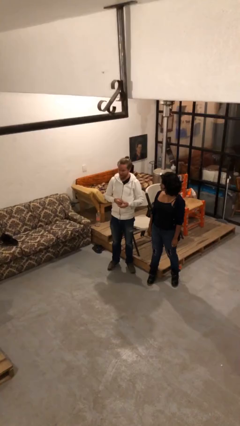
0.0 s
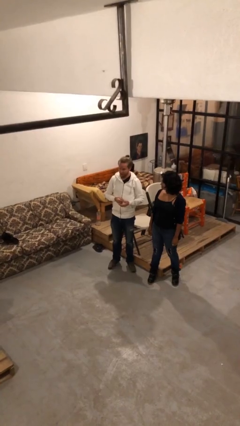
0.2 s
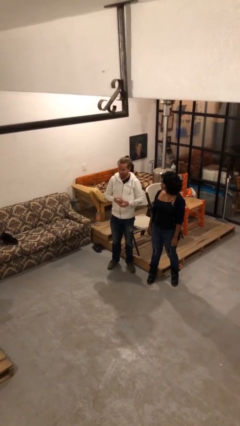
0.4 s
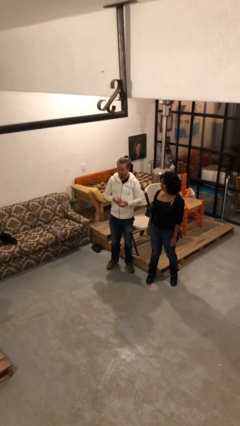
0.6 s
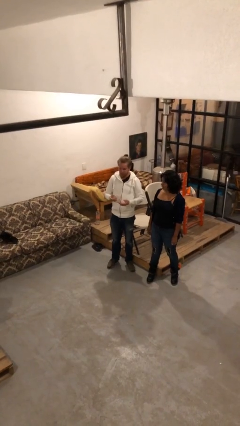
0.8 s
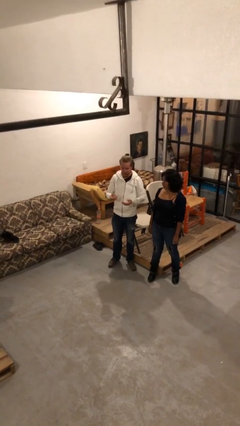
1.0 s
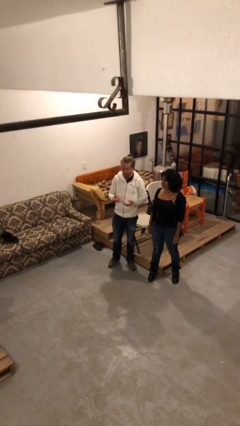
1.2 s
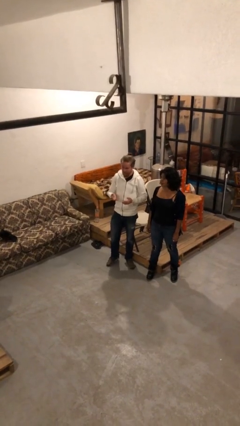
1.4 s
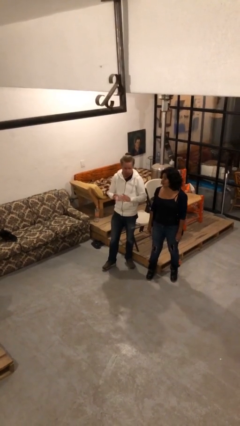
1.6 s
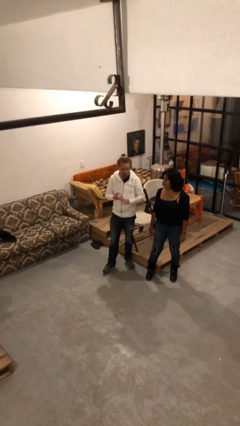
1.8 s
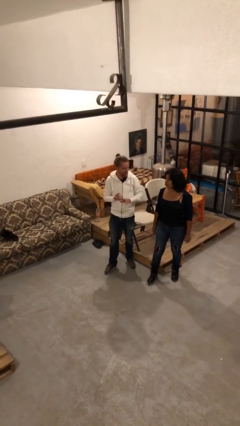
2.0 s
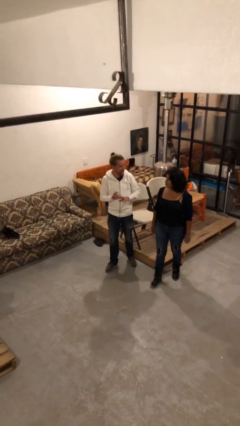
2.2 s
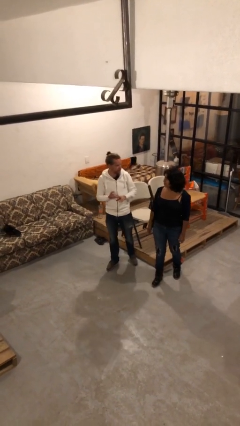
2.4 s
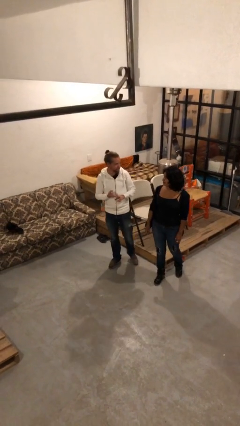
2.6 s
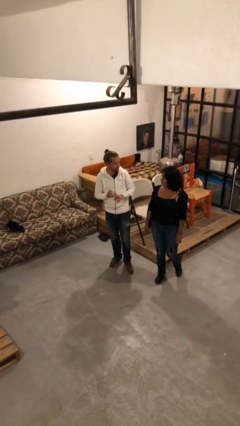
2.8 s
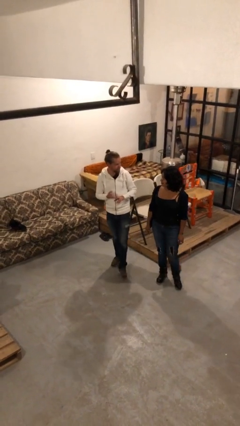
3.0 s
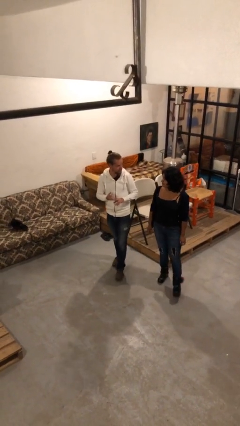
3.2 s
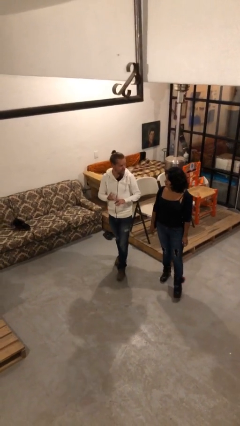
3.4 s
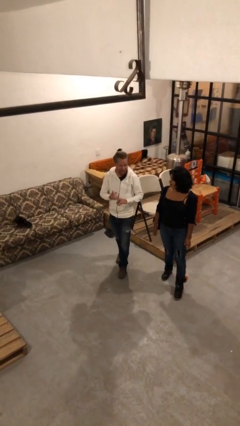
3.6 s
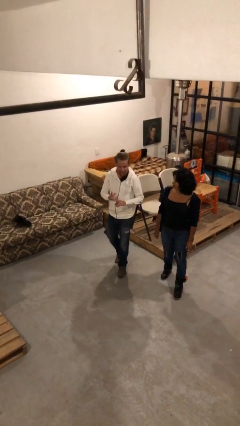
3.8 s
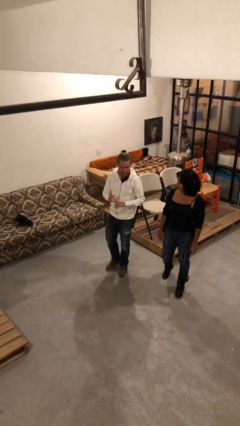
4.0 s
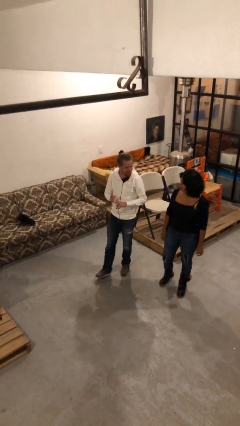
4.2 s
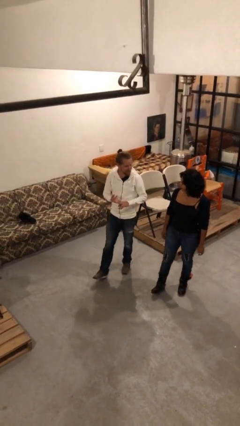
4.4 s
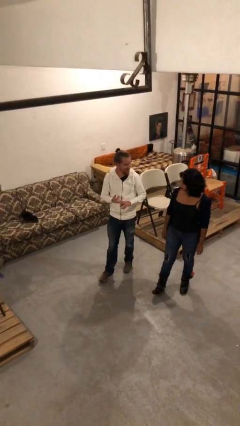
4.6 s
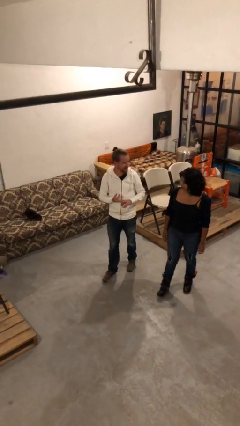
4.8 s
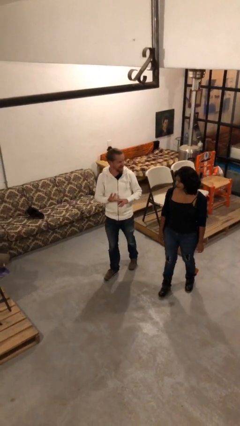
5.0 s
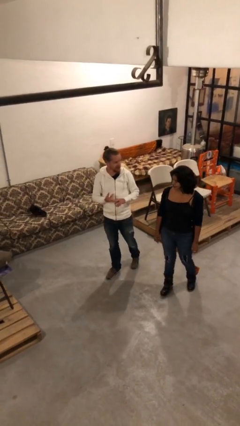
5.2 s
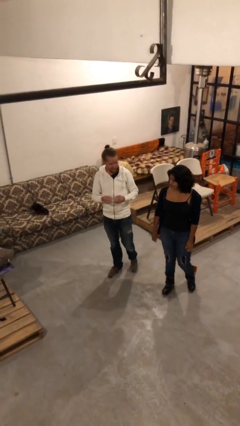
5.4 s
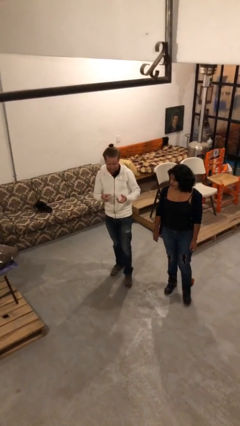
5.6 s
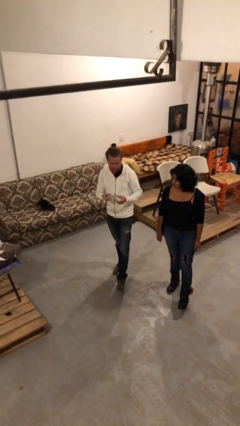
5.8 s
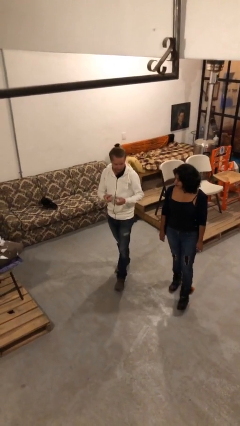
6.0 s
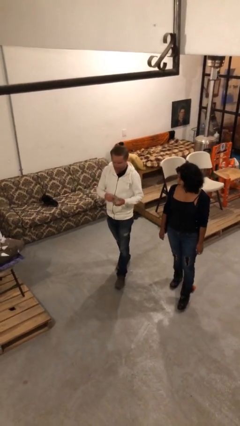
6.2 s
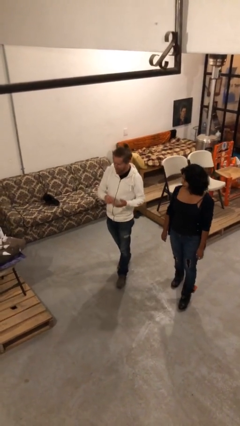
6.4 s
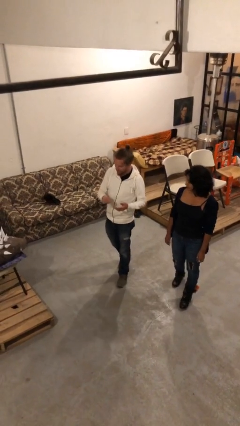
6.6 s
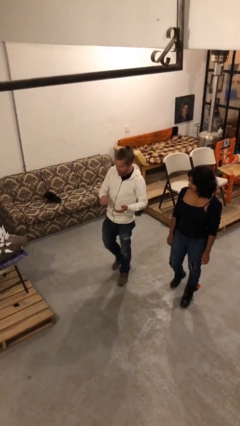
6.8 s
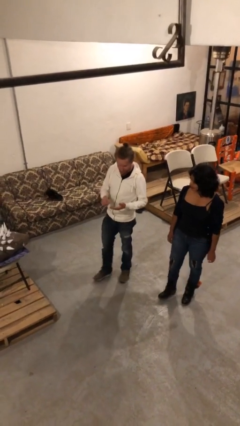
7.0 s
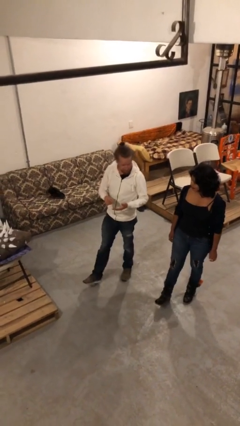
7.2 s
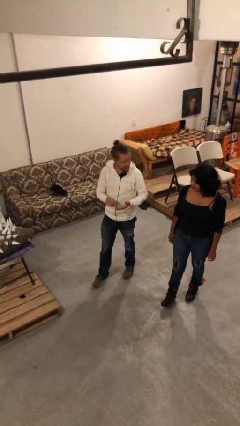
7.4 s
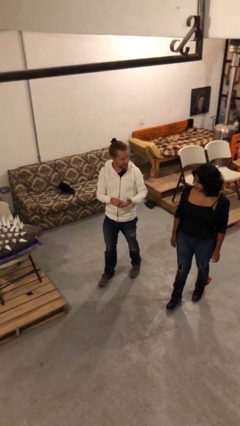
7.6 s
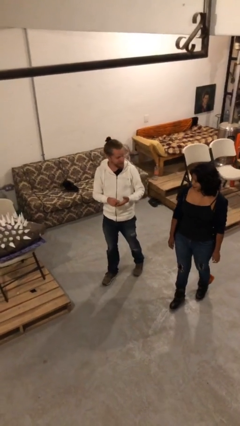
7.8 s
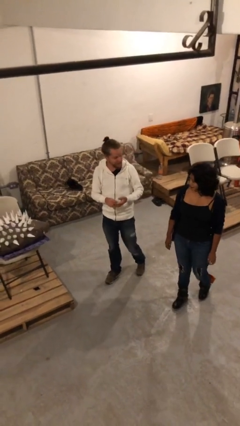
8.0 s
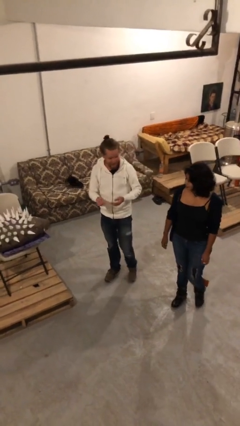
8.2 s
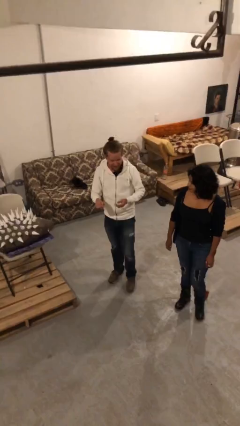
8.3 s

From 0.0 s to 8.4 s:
person talks to person

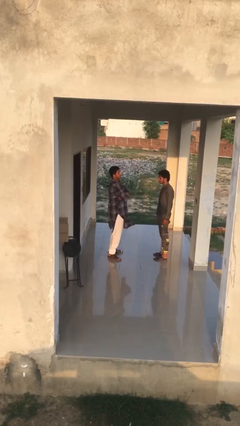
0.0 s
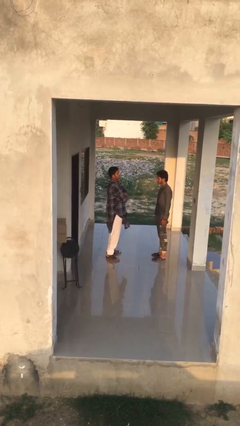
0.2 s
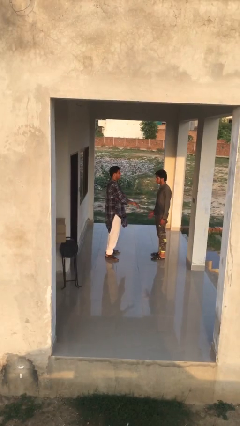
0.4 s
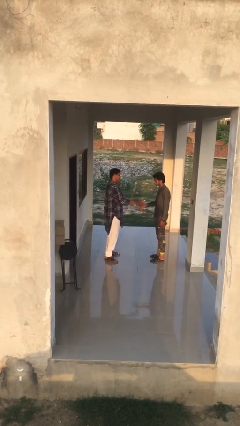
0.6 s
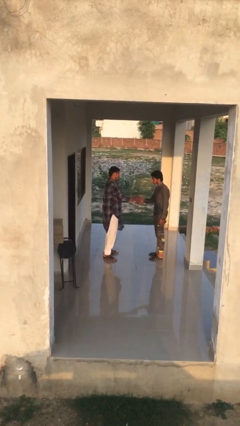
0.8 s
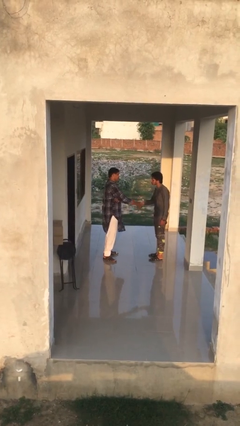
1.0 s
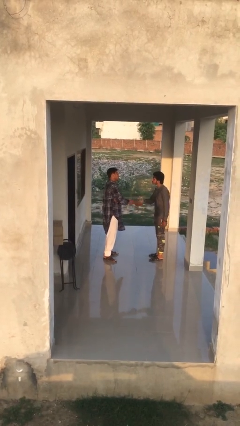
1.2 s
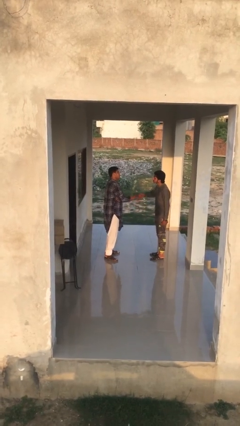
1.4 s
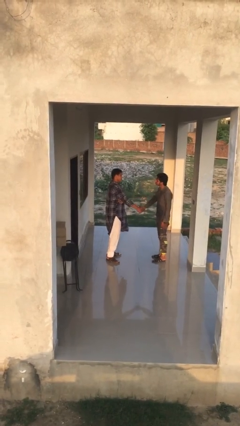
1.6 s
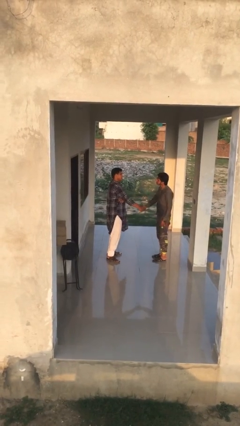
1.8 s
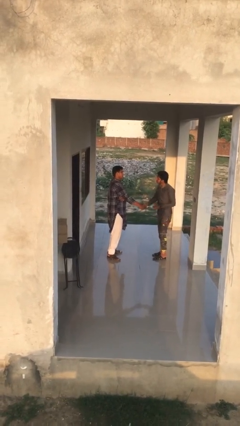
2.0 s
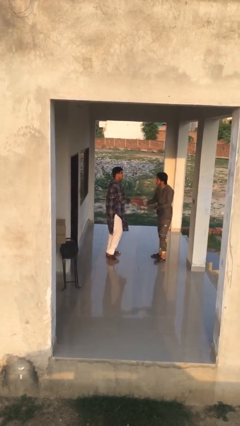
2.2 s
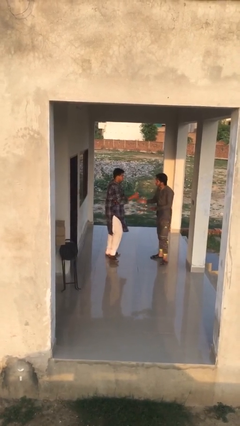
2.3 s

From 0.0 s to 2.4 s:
person shakes hand

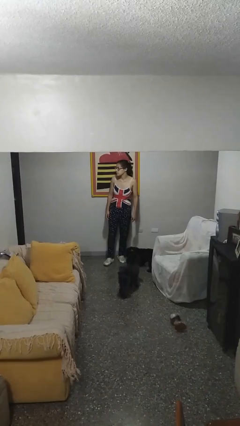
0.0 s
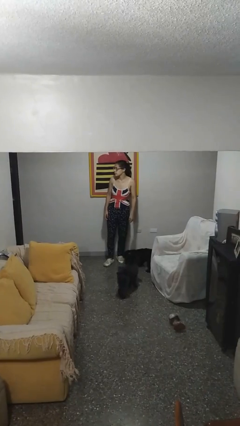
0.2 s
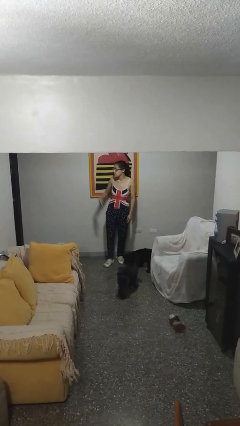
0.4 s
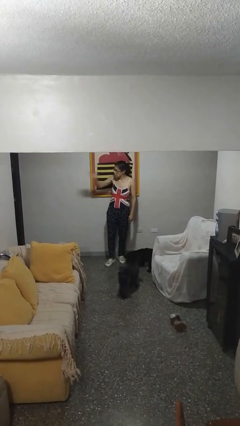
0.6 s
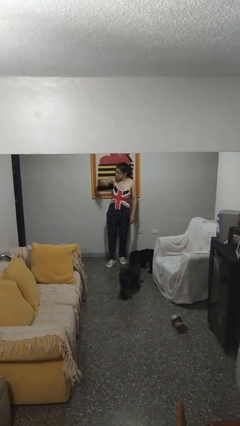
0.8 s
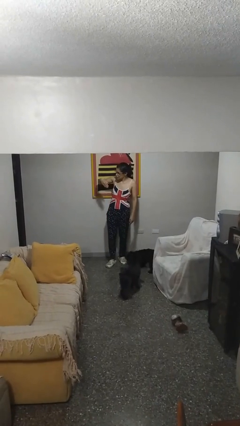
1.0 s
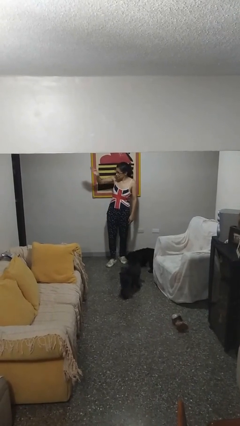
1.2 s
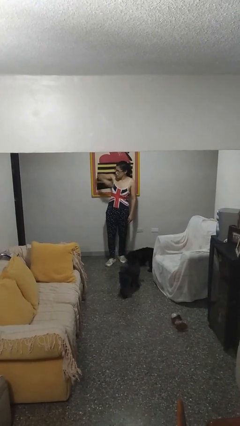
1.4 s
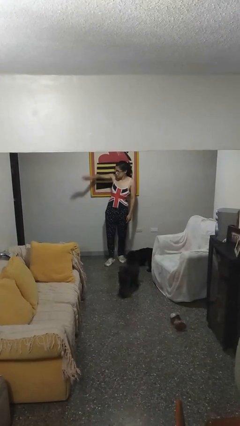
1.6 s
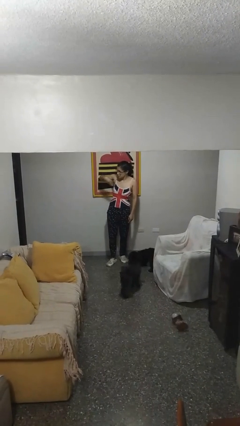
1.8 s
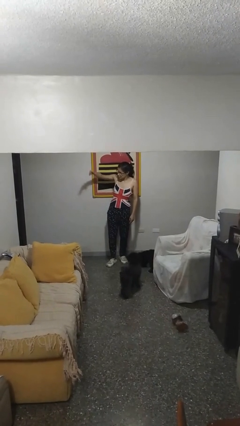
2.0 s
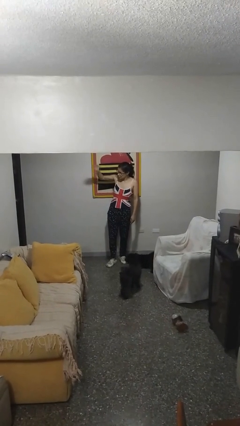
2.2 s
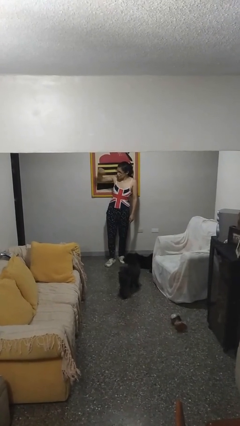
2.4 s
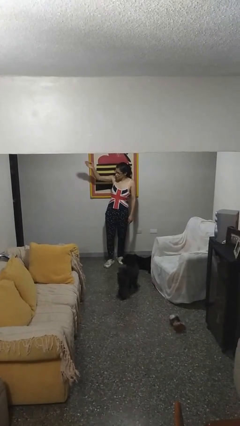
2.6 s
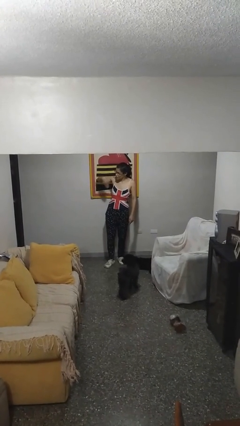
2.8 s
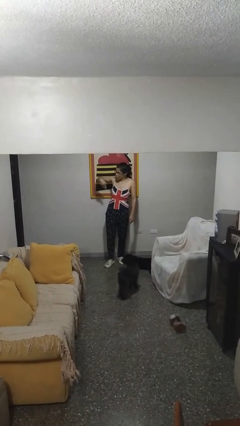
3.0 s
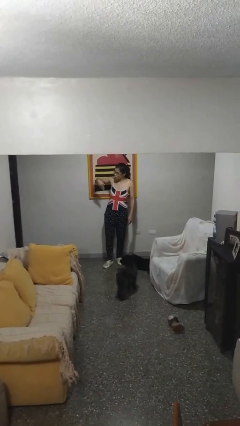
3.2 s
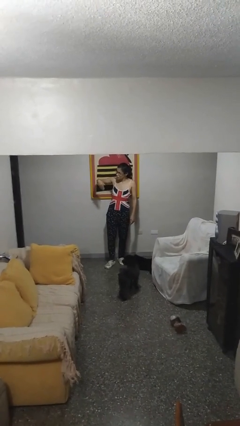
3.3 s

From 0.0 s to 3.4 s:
person gestures come here

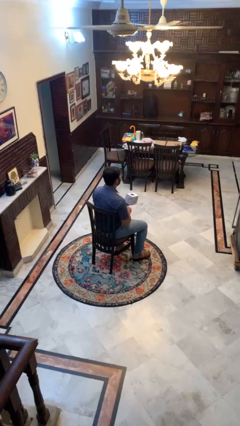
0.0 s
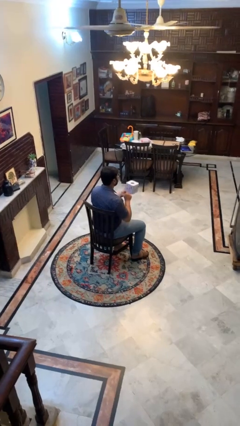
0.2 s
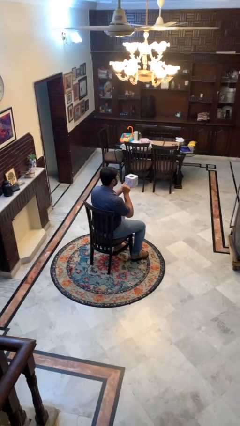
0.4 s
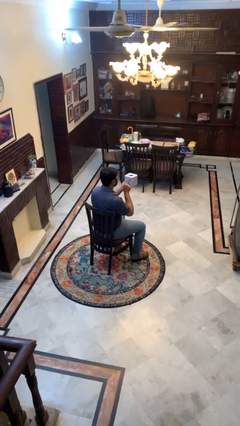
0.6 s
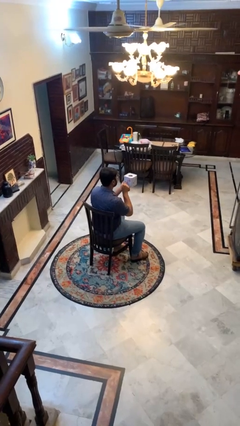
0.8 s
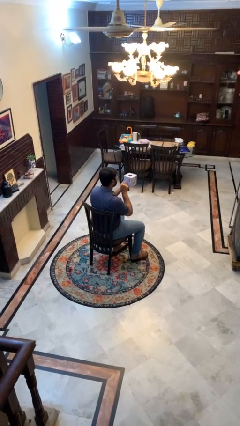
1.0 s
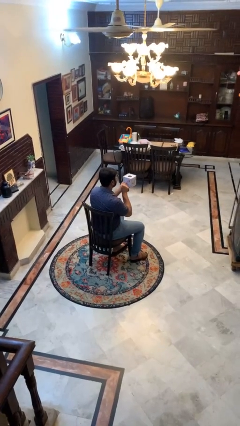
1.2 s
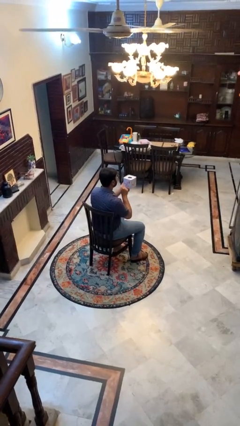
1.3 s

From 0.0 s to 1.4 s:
person taps object with finger

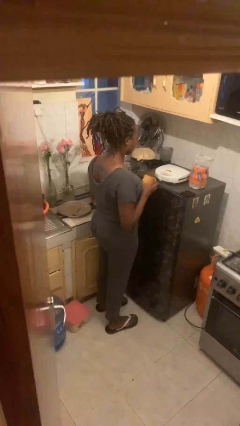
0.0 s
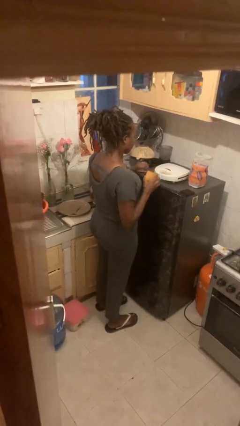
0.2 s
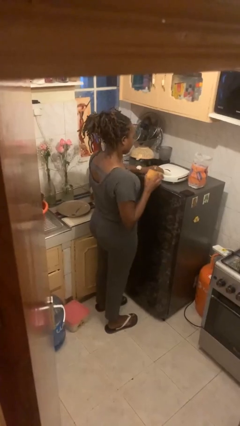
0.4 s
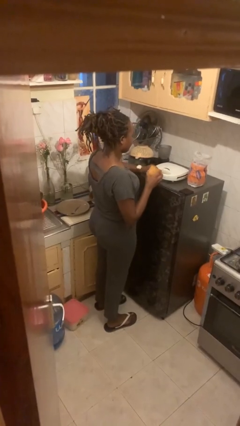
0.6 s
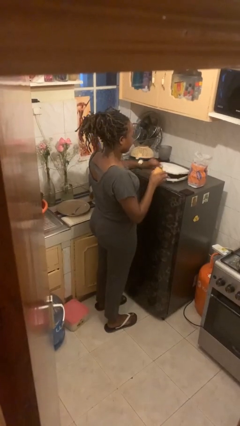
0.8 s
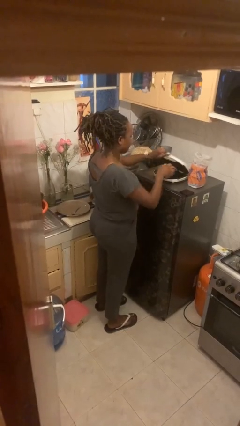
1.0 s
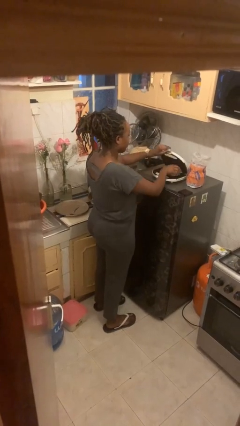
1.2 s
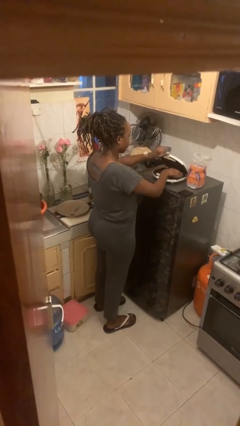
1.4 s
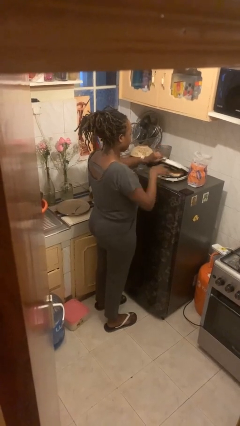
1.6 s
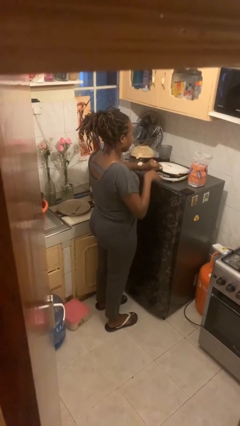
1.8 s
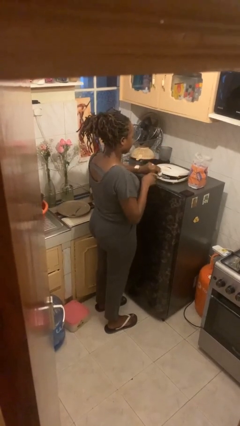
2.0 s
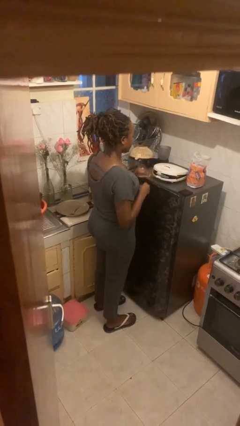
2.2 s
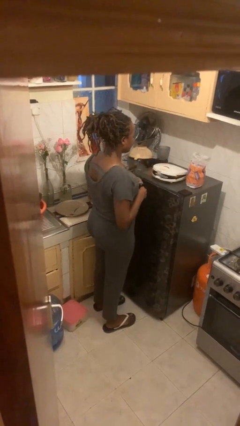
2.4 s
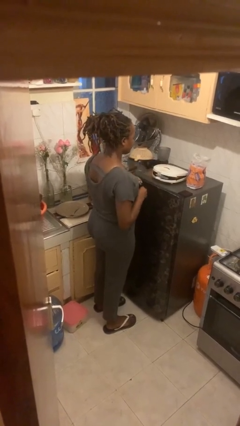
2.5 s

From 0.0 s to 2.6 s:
person puts object into toaster
